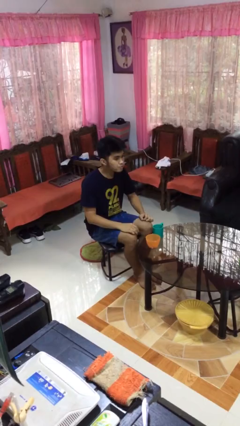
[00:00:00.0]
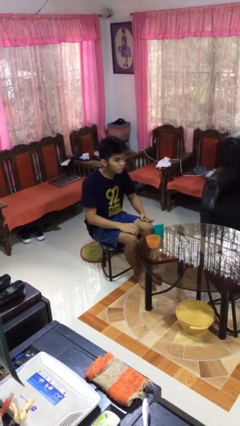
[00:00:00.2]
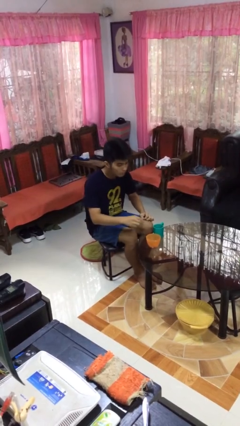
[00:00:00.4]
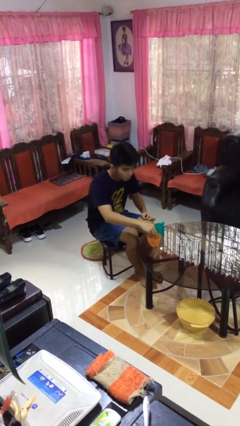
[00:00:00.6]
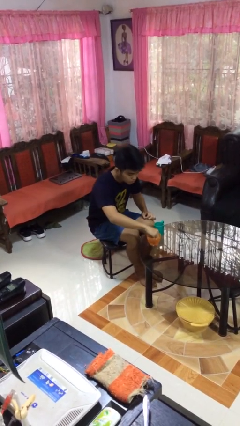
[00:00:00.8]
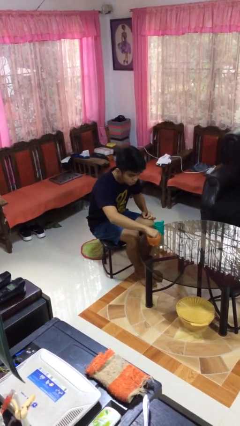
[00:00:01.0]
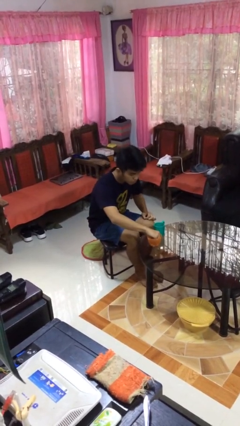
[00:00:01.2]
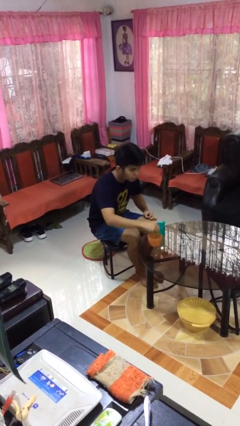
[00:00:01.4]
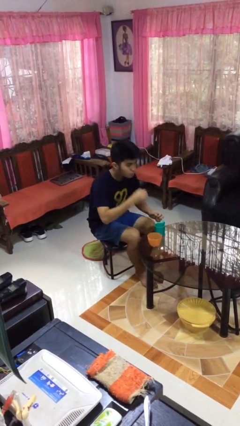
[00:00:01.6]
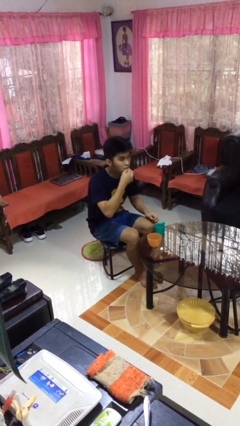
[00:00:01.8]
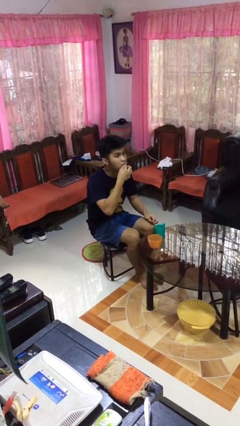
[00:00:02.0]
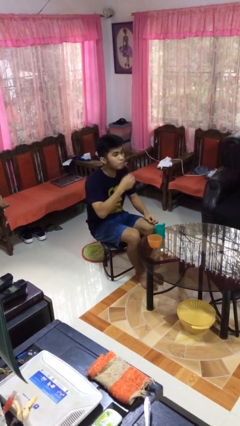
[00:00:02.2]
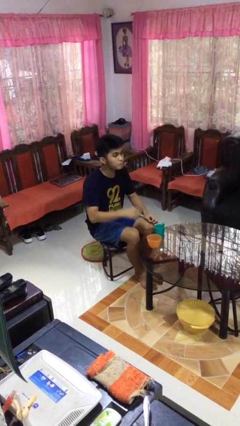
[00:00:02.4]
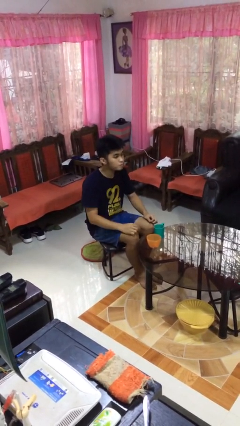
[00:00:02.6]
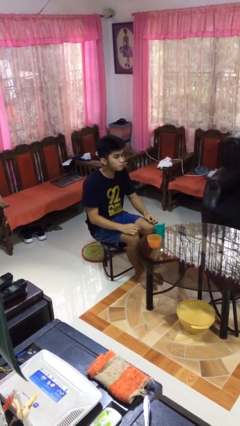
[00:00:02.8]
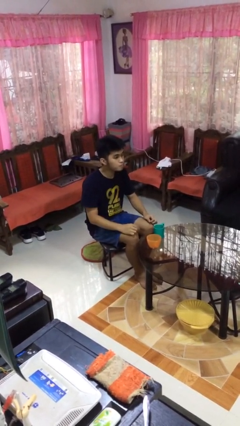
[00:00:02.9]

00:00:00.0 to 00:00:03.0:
person takes medicine pills

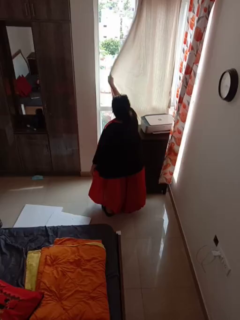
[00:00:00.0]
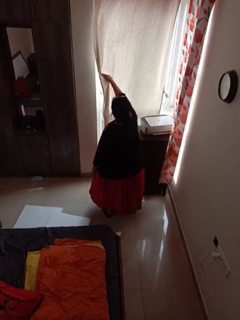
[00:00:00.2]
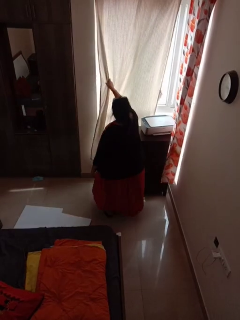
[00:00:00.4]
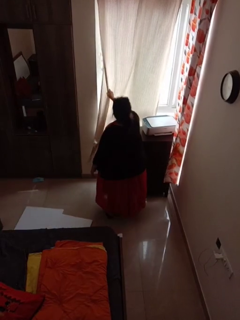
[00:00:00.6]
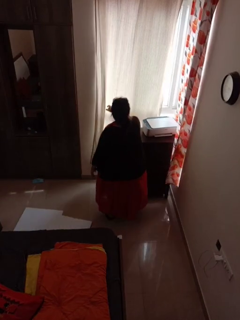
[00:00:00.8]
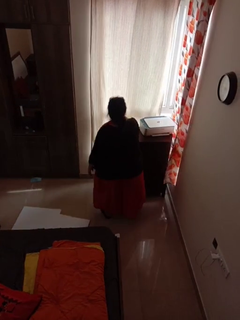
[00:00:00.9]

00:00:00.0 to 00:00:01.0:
person closes curtains

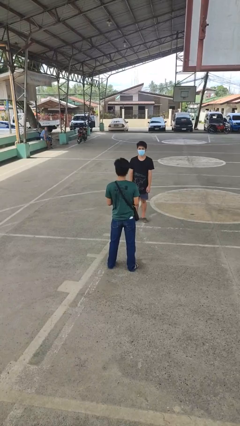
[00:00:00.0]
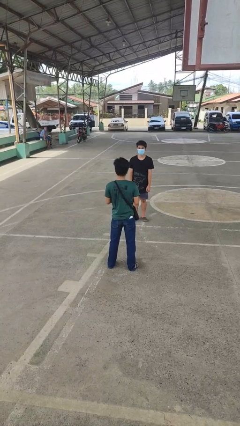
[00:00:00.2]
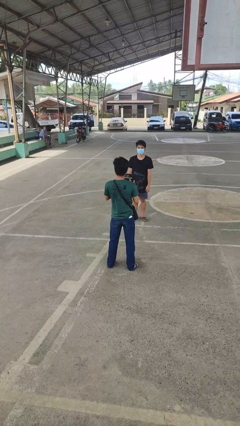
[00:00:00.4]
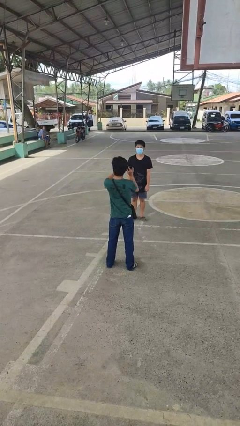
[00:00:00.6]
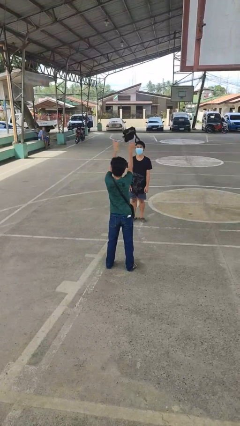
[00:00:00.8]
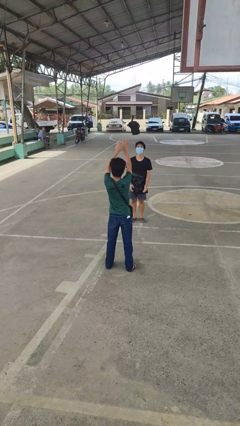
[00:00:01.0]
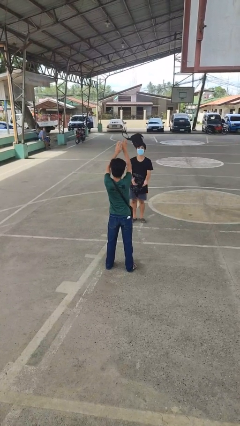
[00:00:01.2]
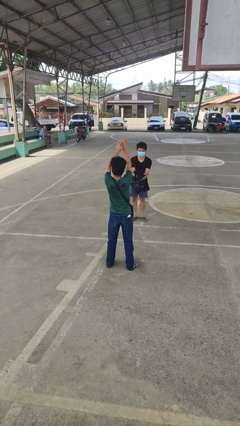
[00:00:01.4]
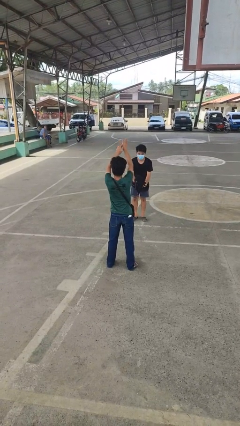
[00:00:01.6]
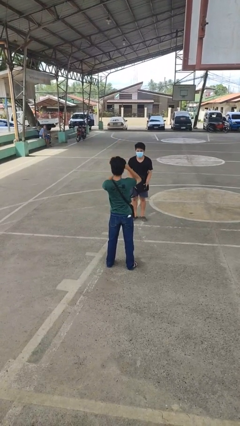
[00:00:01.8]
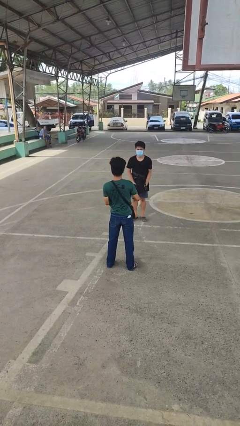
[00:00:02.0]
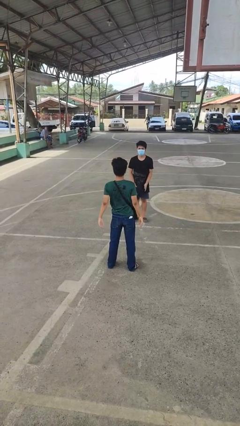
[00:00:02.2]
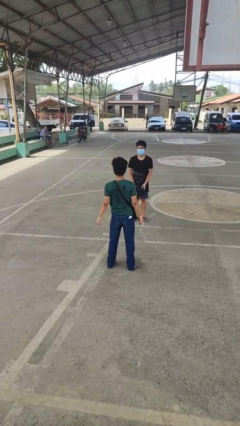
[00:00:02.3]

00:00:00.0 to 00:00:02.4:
person throws object to person

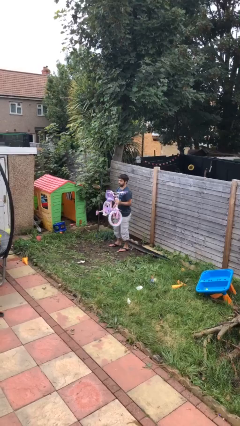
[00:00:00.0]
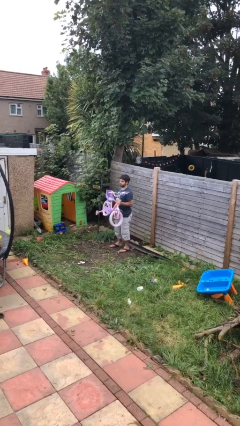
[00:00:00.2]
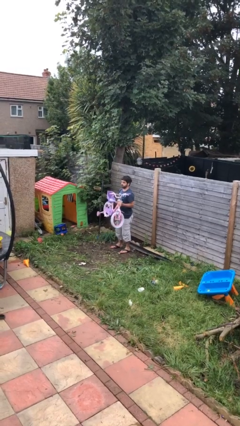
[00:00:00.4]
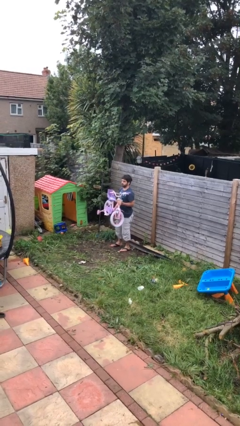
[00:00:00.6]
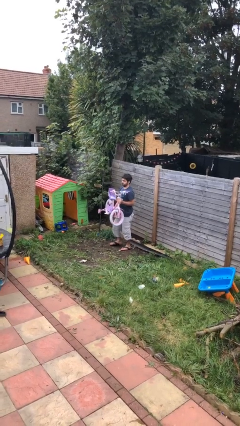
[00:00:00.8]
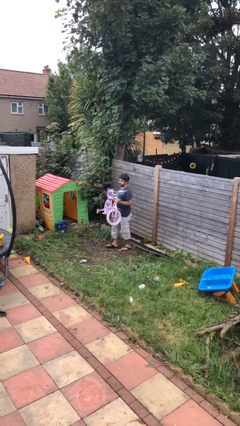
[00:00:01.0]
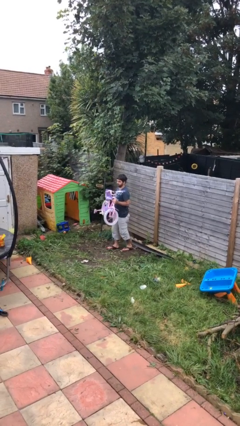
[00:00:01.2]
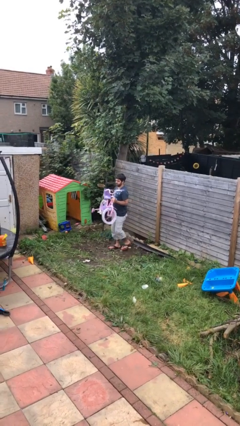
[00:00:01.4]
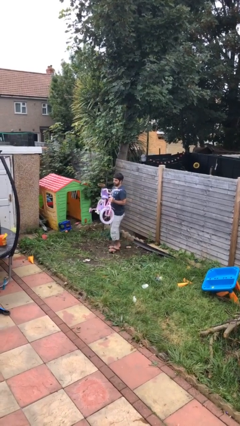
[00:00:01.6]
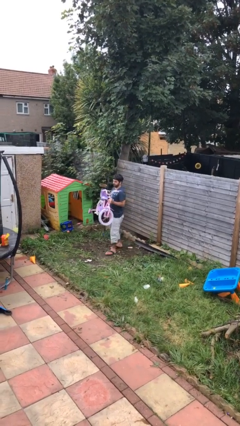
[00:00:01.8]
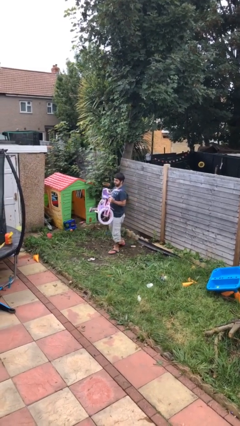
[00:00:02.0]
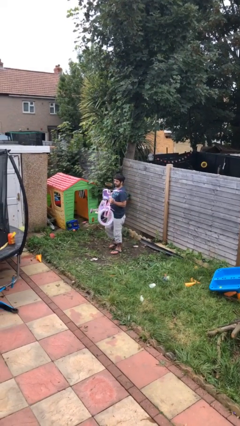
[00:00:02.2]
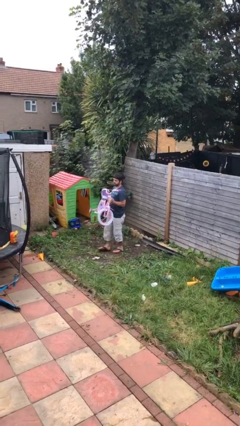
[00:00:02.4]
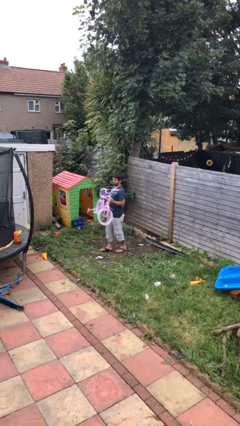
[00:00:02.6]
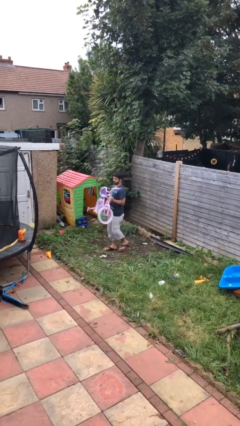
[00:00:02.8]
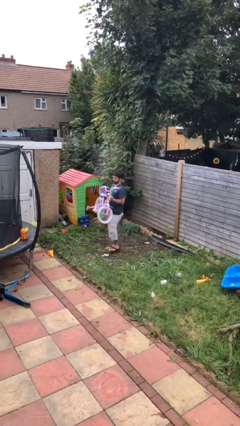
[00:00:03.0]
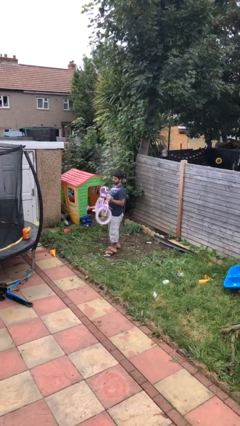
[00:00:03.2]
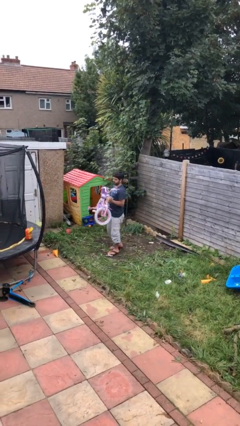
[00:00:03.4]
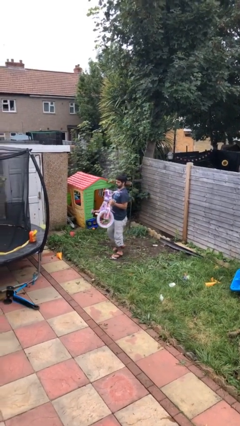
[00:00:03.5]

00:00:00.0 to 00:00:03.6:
person carries heavy object

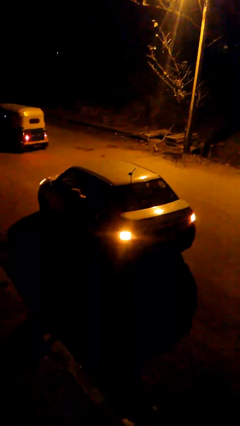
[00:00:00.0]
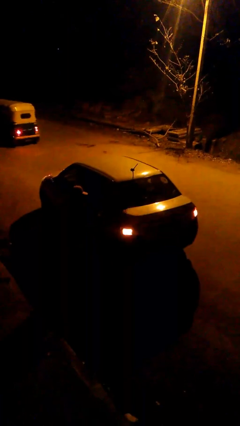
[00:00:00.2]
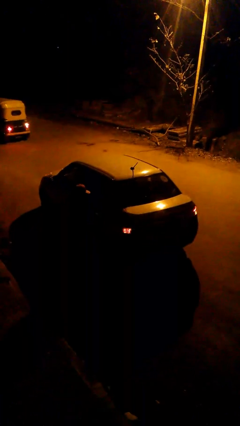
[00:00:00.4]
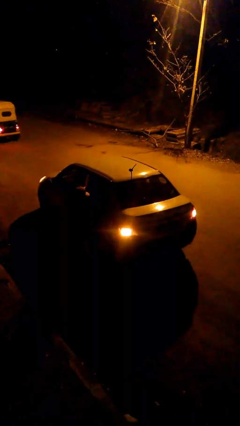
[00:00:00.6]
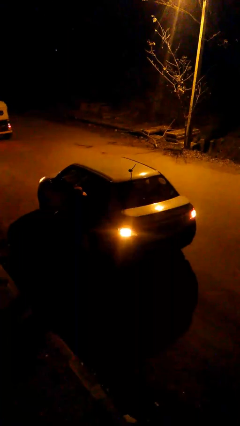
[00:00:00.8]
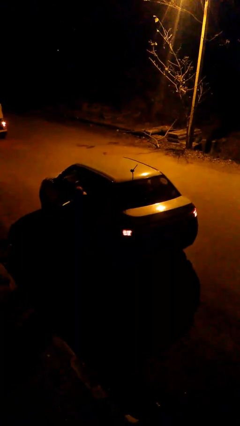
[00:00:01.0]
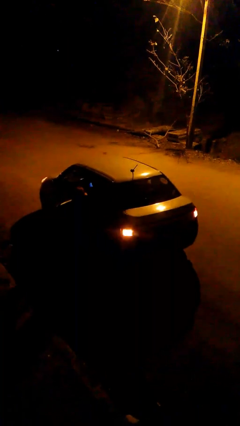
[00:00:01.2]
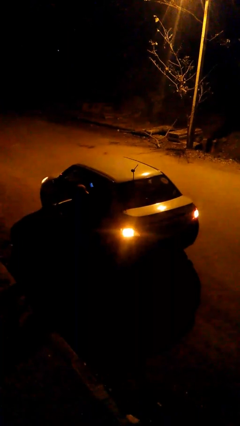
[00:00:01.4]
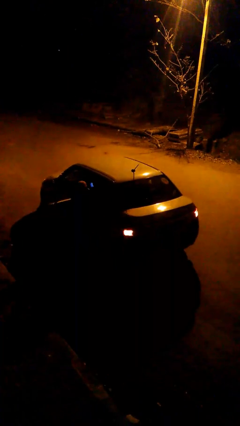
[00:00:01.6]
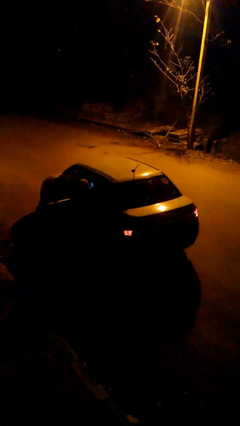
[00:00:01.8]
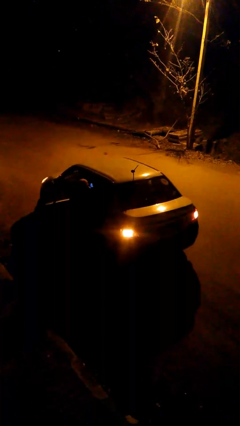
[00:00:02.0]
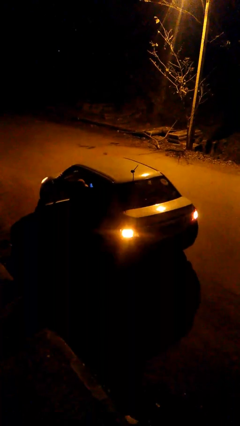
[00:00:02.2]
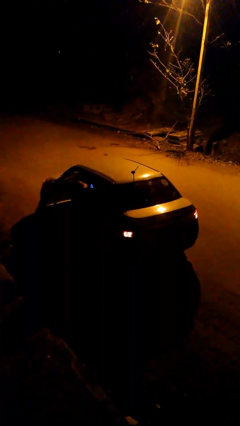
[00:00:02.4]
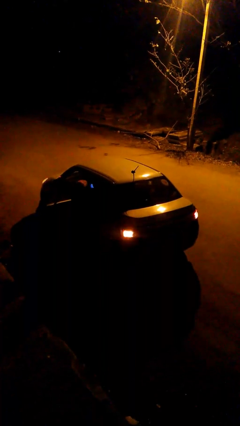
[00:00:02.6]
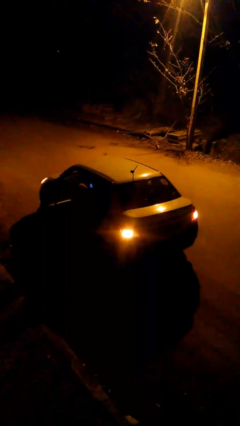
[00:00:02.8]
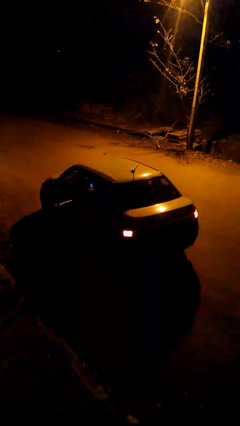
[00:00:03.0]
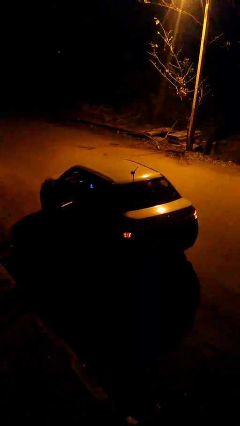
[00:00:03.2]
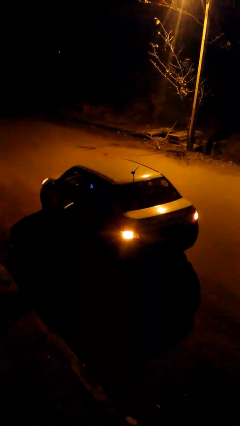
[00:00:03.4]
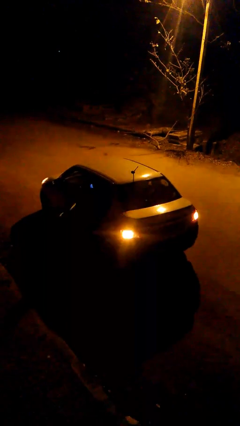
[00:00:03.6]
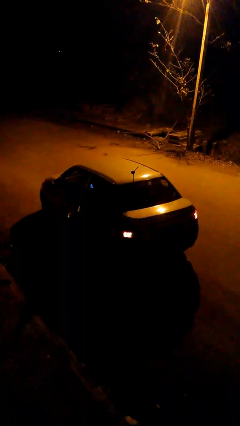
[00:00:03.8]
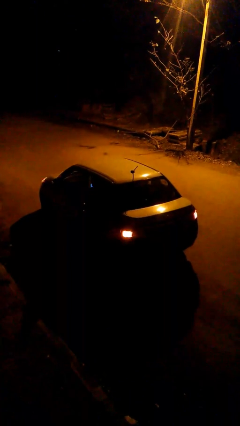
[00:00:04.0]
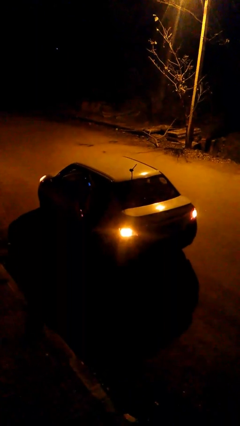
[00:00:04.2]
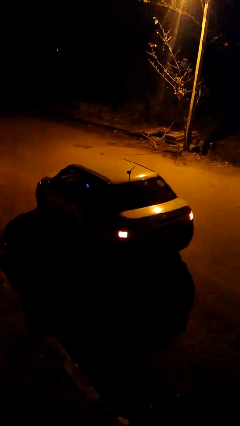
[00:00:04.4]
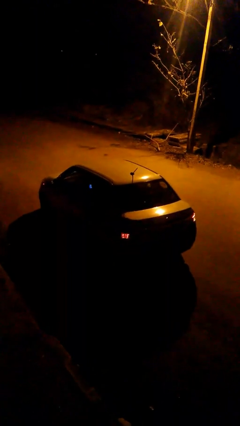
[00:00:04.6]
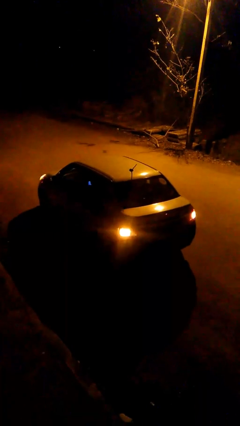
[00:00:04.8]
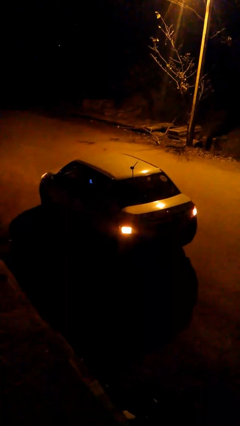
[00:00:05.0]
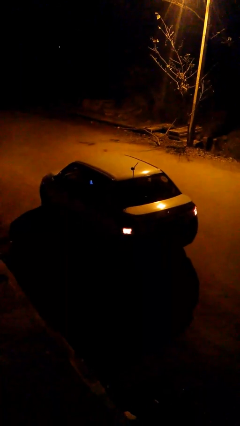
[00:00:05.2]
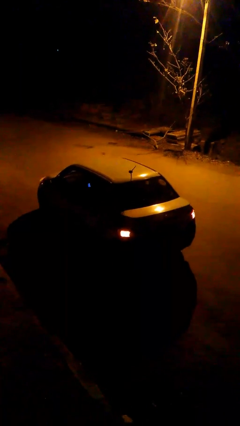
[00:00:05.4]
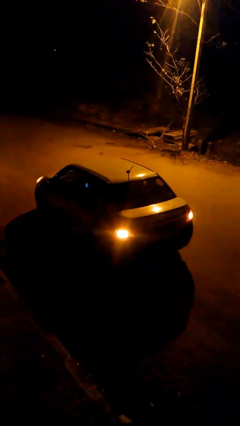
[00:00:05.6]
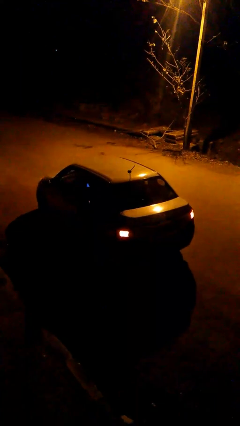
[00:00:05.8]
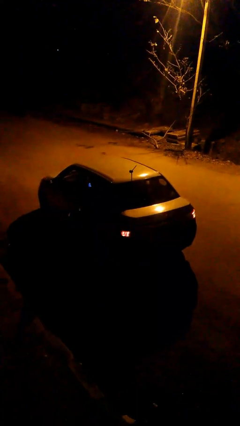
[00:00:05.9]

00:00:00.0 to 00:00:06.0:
car picks up person

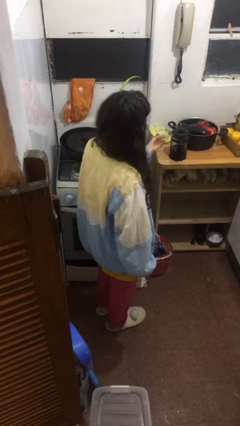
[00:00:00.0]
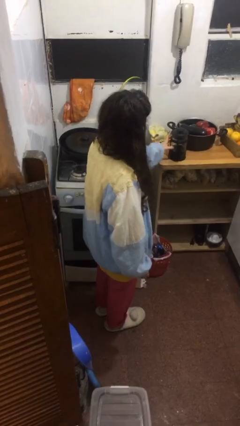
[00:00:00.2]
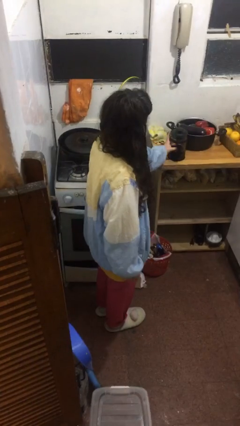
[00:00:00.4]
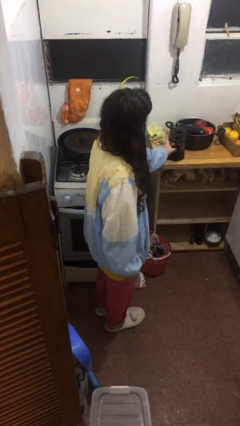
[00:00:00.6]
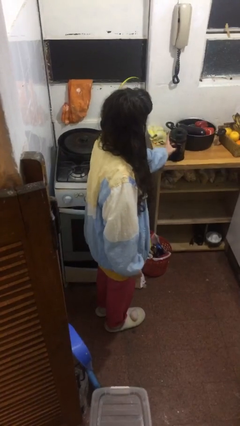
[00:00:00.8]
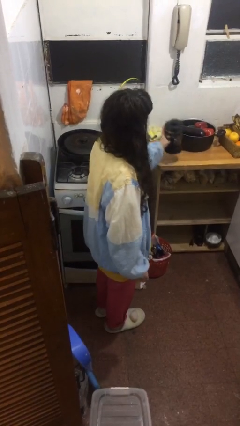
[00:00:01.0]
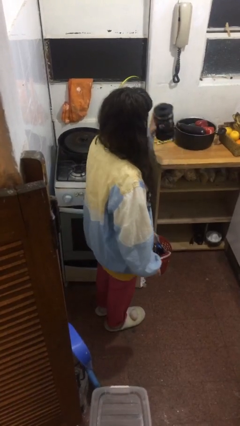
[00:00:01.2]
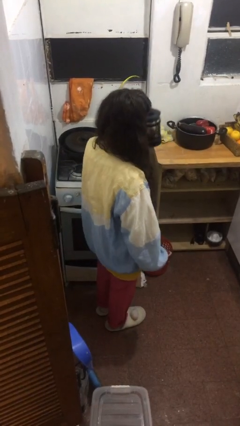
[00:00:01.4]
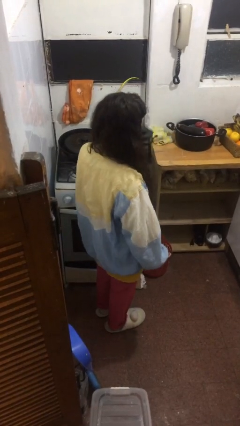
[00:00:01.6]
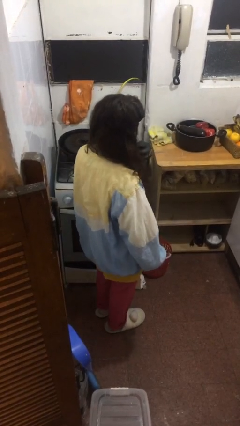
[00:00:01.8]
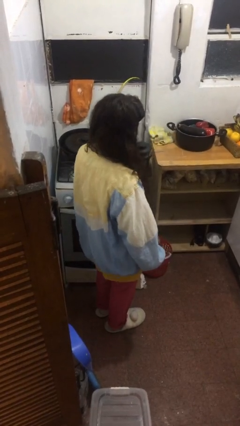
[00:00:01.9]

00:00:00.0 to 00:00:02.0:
person picks up object from countertop
